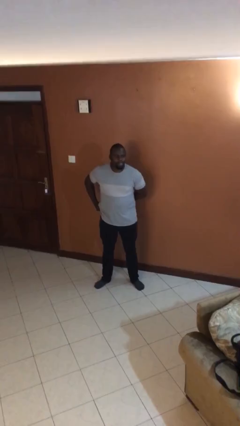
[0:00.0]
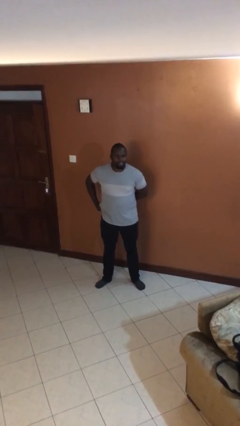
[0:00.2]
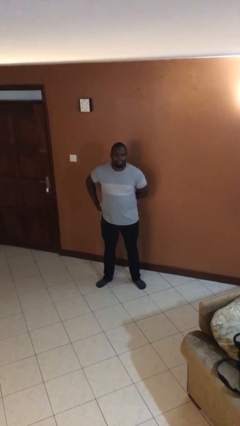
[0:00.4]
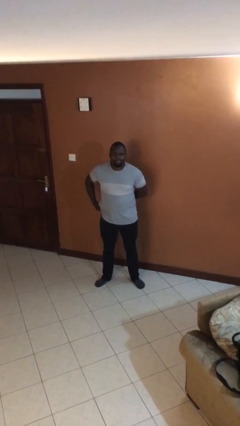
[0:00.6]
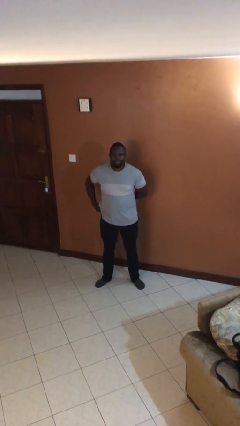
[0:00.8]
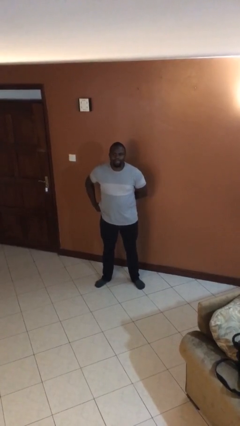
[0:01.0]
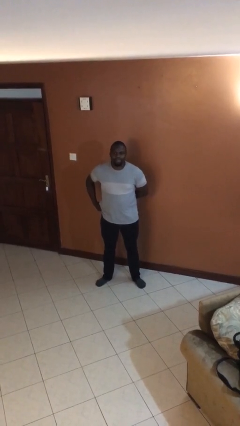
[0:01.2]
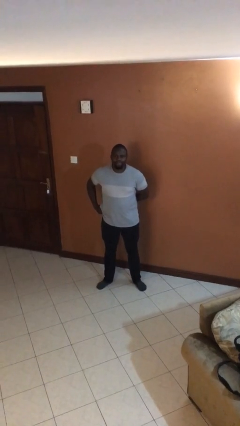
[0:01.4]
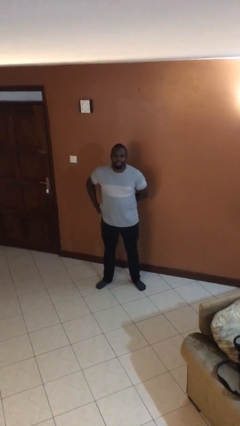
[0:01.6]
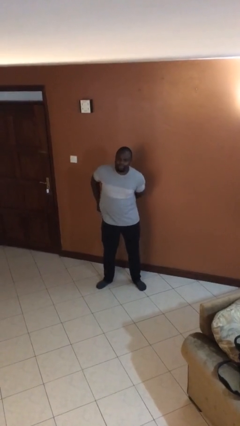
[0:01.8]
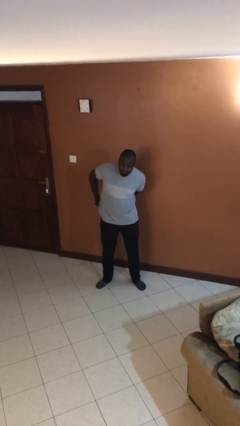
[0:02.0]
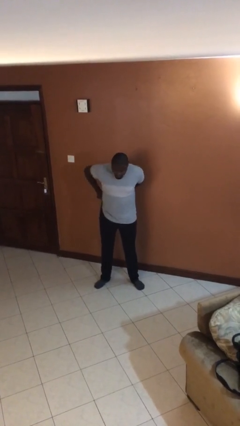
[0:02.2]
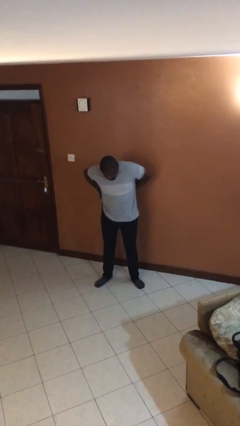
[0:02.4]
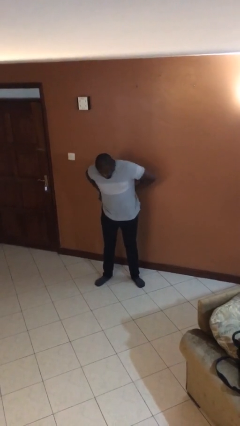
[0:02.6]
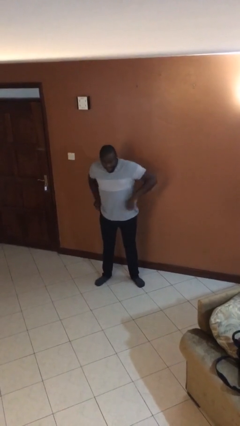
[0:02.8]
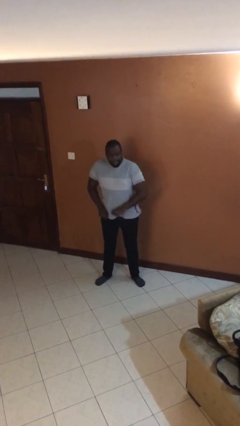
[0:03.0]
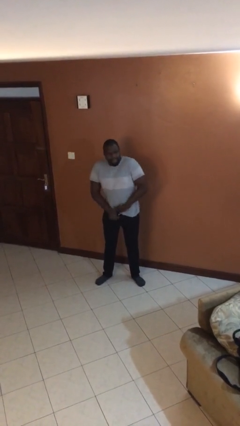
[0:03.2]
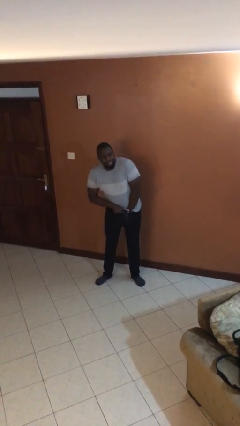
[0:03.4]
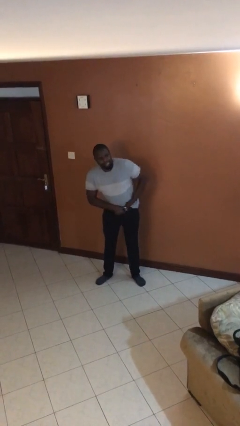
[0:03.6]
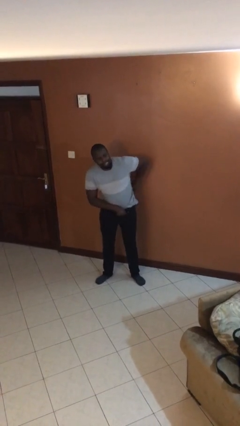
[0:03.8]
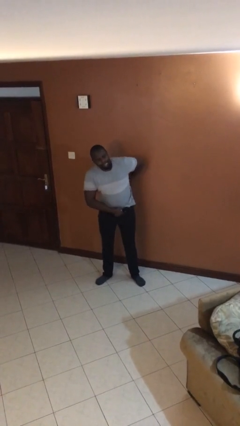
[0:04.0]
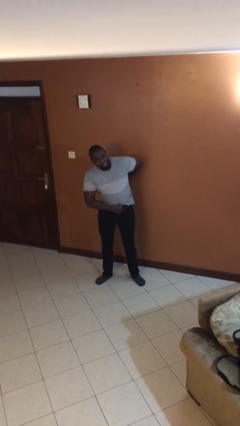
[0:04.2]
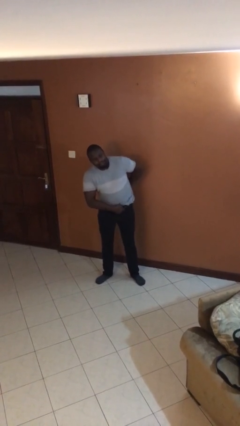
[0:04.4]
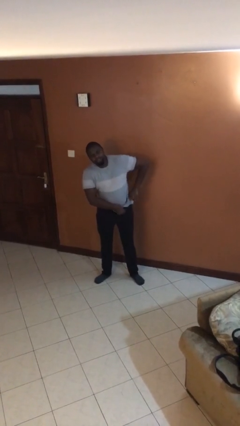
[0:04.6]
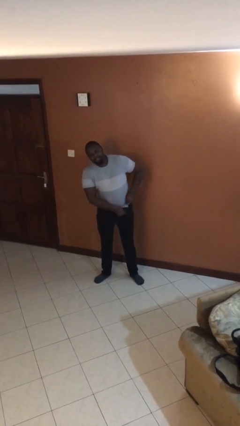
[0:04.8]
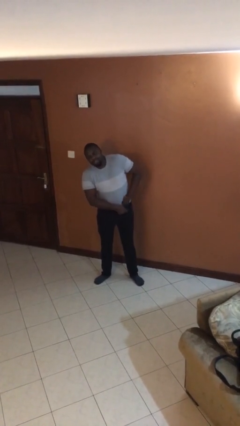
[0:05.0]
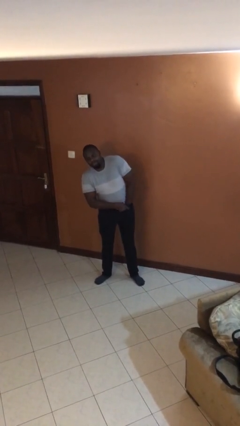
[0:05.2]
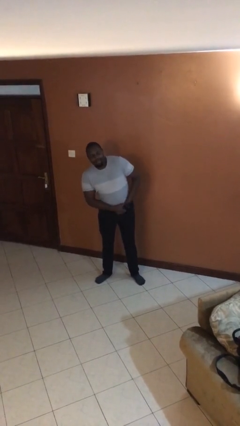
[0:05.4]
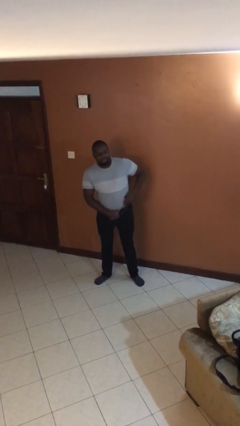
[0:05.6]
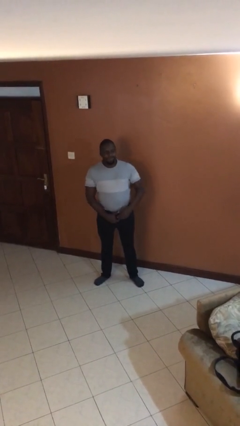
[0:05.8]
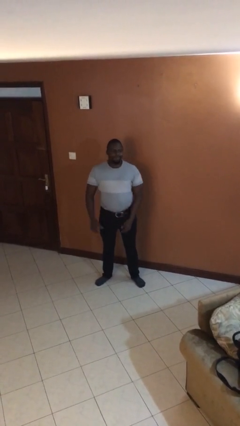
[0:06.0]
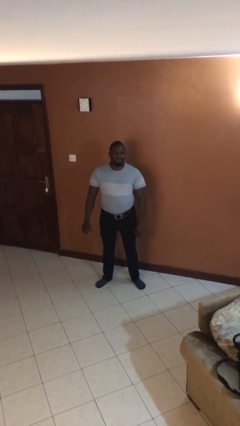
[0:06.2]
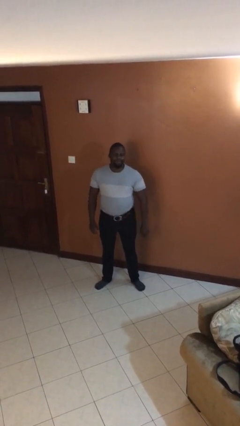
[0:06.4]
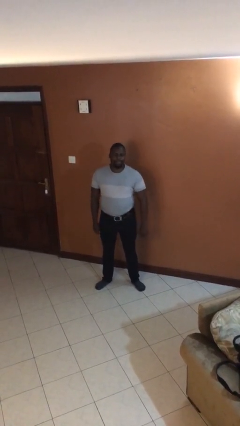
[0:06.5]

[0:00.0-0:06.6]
person tucks in shirt

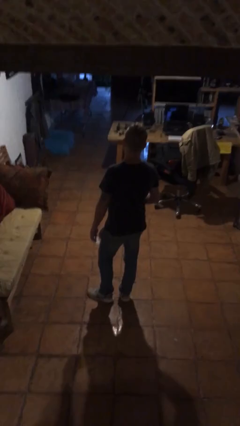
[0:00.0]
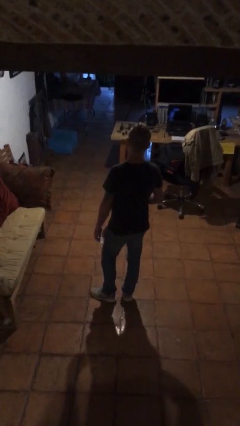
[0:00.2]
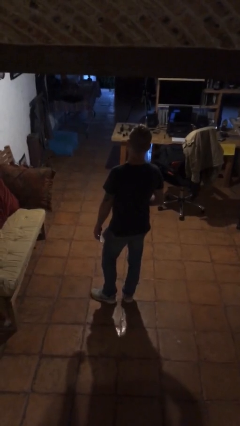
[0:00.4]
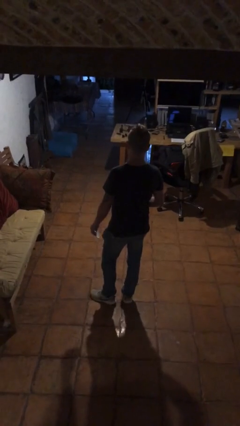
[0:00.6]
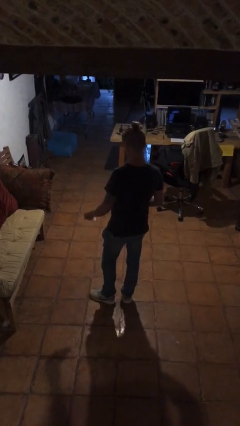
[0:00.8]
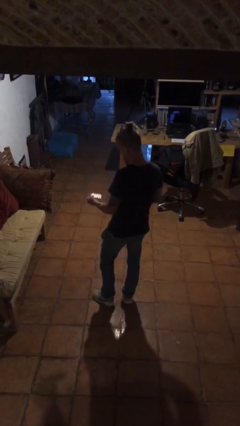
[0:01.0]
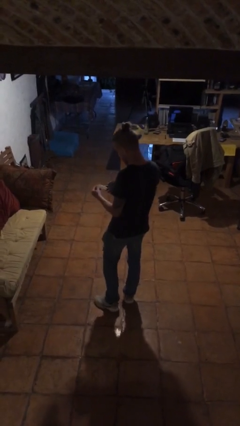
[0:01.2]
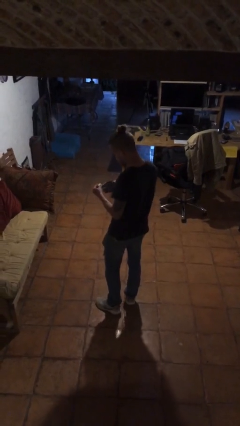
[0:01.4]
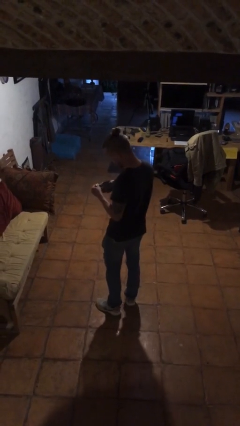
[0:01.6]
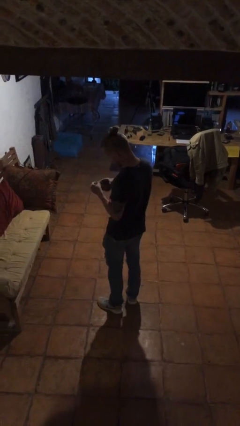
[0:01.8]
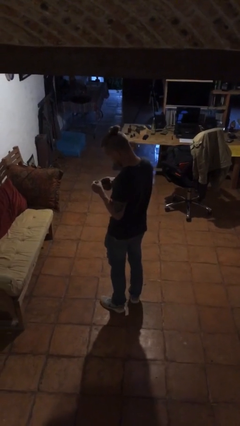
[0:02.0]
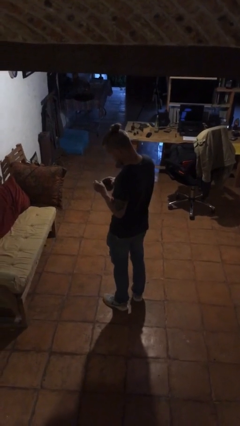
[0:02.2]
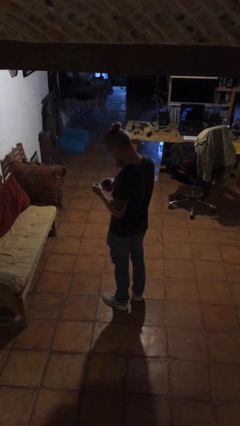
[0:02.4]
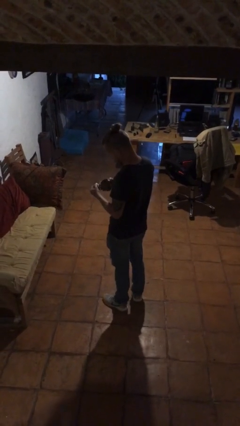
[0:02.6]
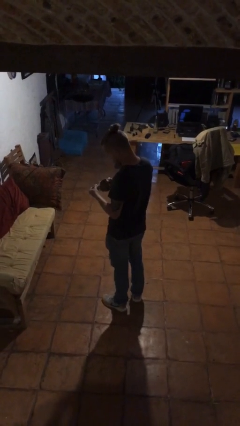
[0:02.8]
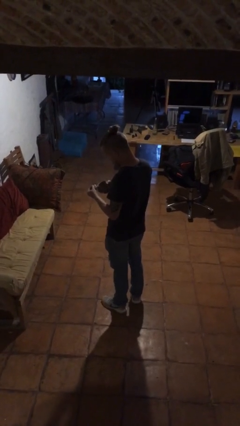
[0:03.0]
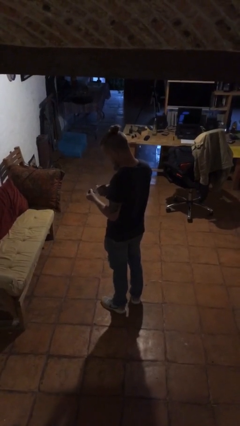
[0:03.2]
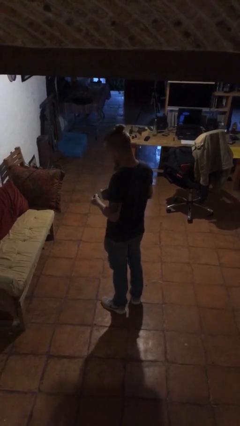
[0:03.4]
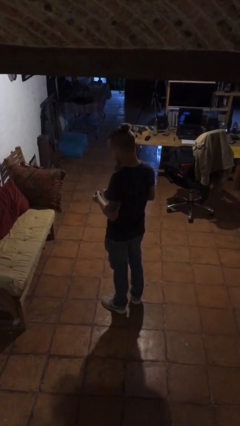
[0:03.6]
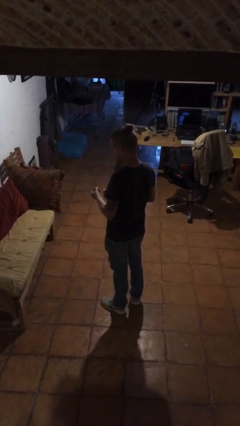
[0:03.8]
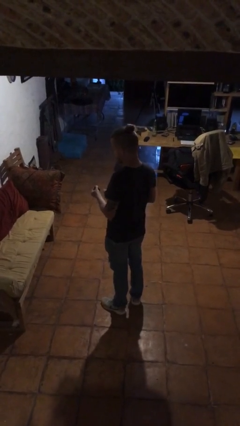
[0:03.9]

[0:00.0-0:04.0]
person takes medicine pills

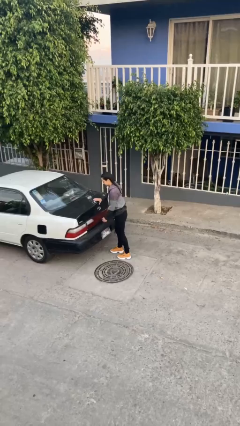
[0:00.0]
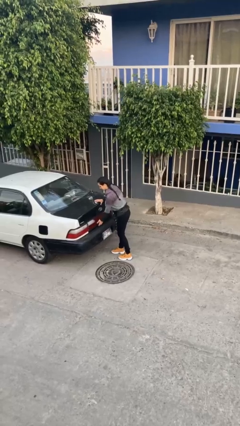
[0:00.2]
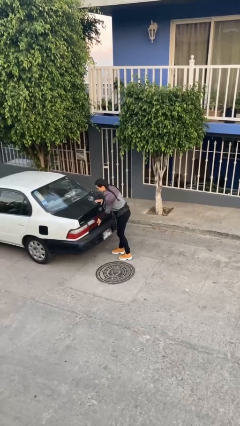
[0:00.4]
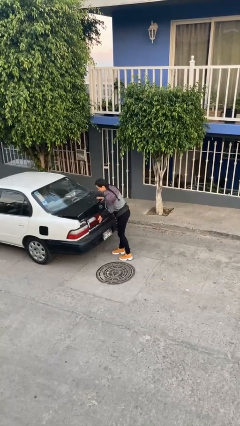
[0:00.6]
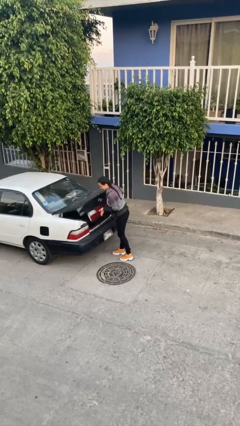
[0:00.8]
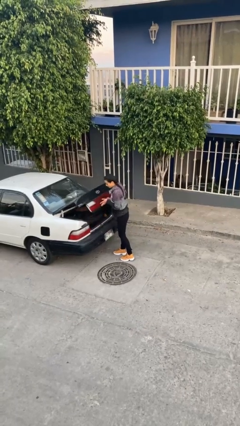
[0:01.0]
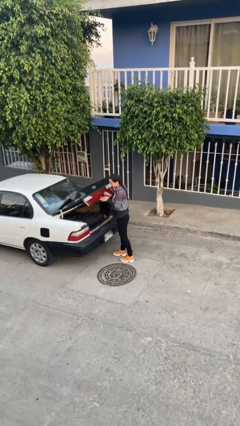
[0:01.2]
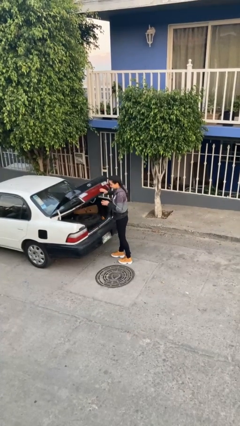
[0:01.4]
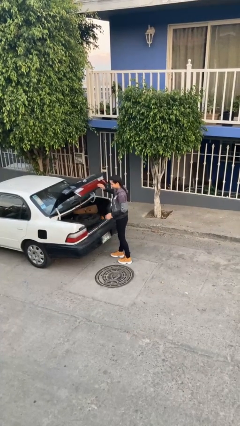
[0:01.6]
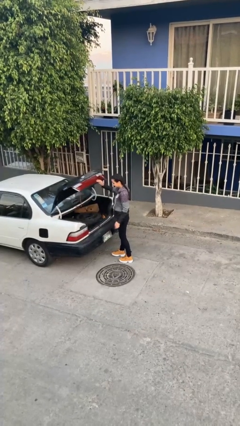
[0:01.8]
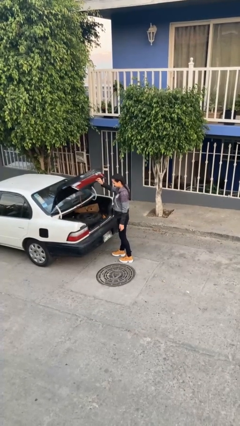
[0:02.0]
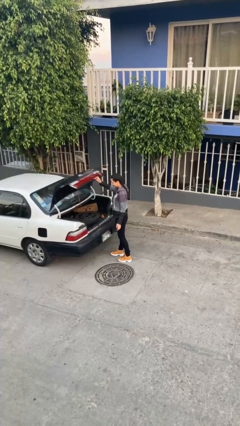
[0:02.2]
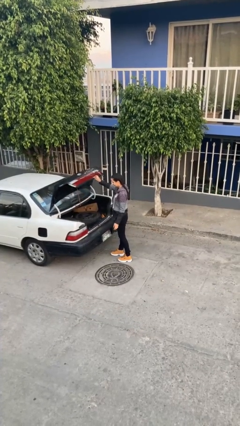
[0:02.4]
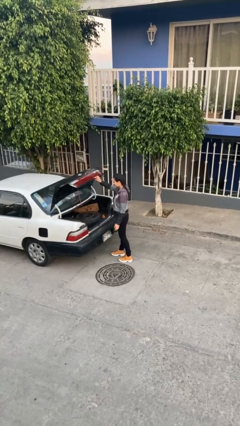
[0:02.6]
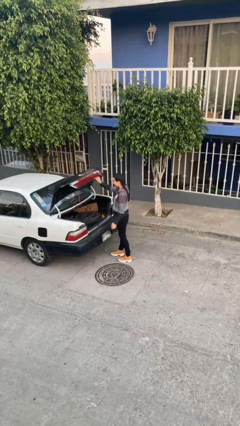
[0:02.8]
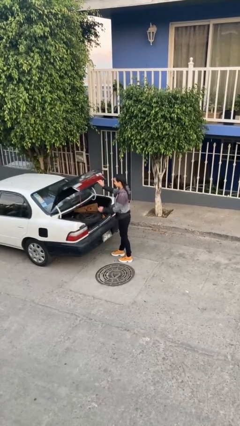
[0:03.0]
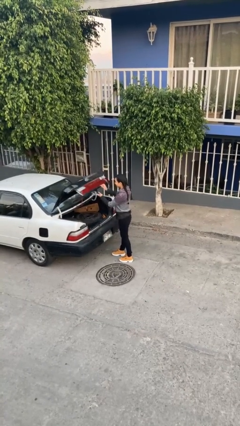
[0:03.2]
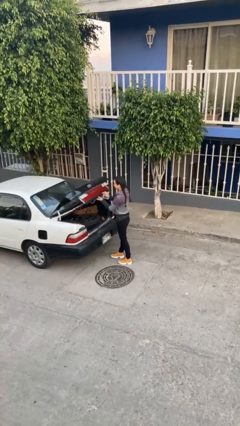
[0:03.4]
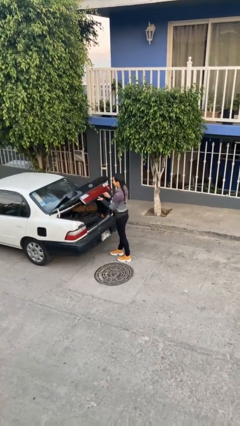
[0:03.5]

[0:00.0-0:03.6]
person opens car trunk

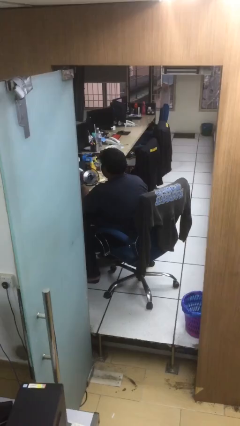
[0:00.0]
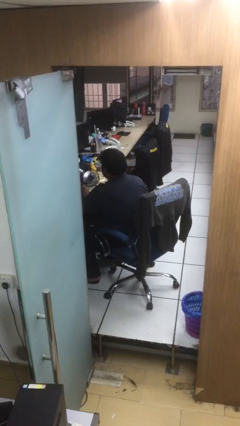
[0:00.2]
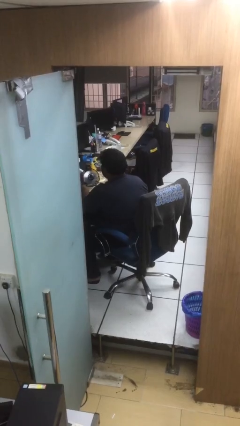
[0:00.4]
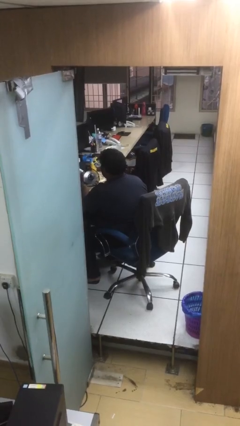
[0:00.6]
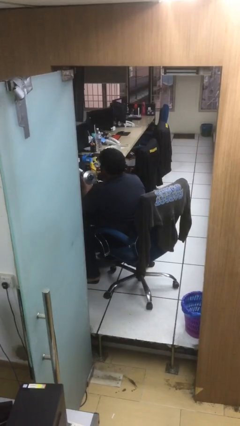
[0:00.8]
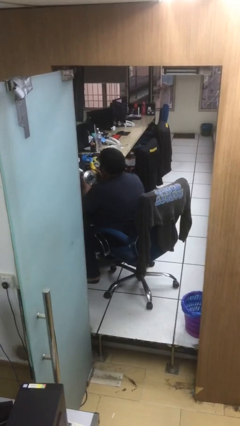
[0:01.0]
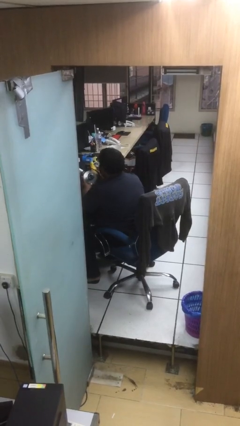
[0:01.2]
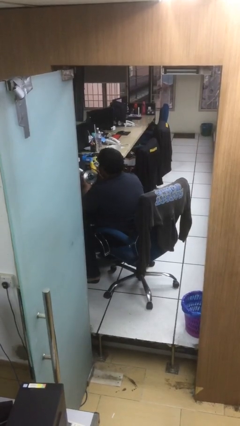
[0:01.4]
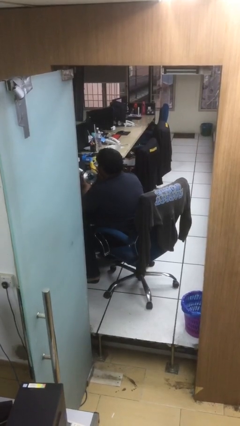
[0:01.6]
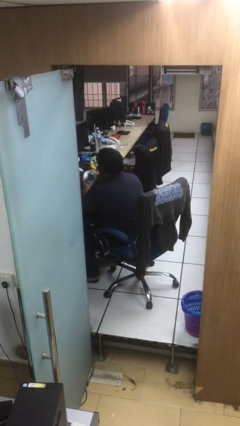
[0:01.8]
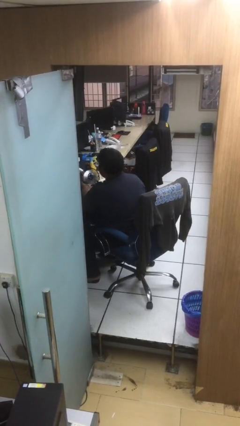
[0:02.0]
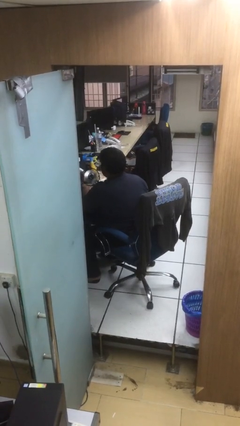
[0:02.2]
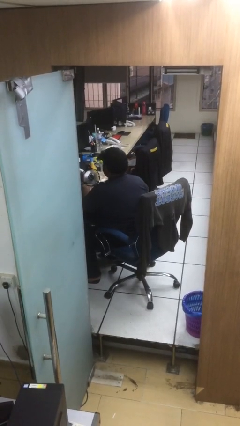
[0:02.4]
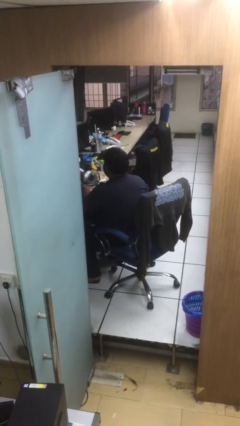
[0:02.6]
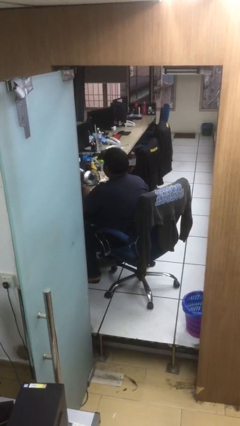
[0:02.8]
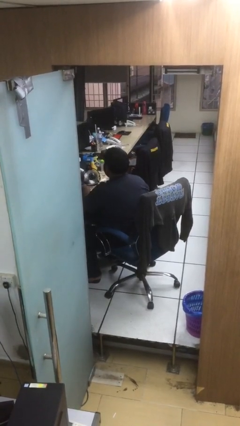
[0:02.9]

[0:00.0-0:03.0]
person turns off fan

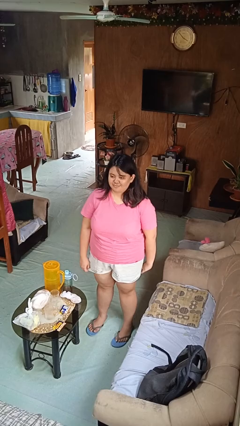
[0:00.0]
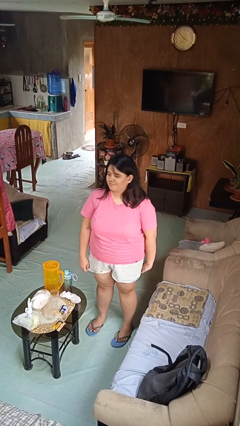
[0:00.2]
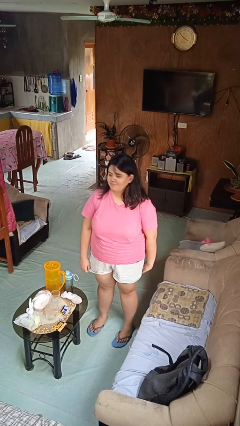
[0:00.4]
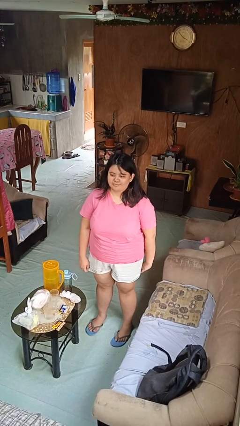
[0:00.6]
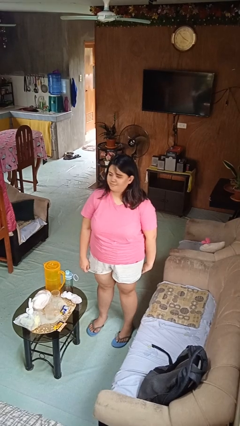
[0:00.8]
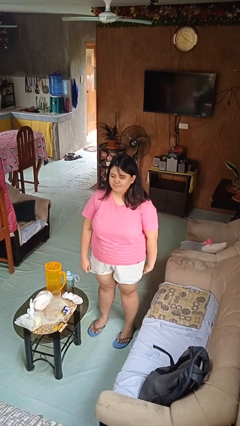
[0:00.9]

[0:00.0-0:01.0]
person shakes head
